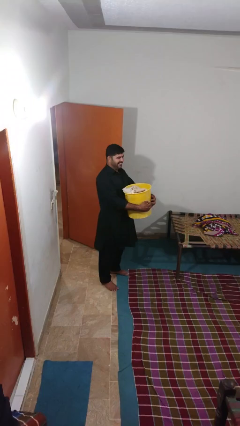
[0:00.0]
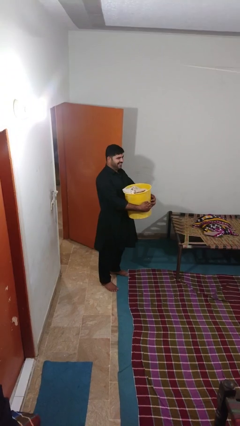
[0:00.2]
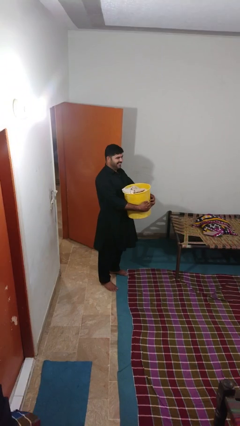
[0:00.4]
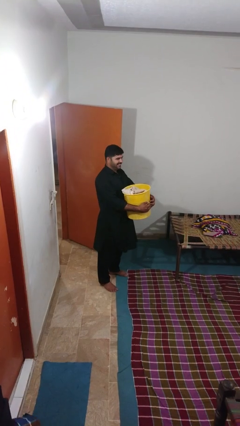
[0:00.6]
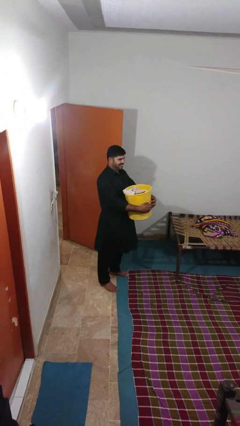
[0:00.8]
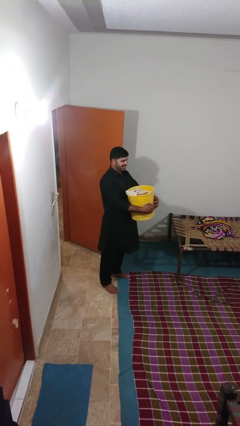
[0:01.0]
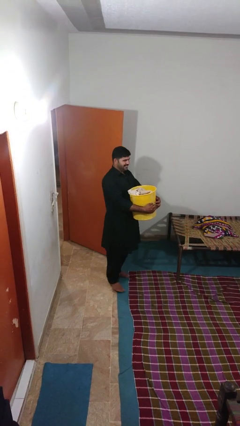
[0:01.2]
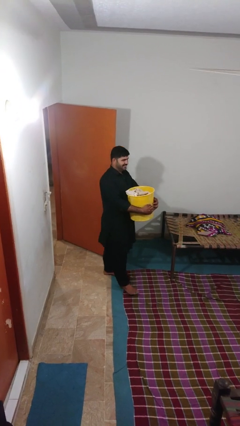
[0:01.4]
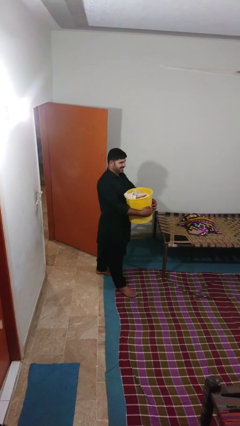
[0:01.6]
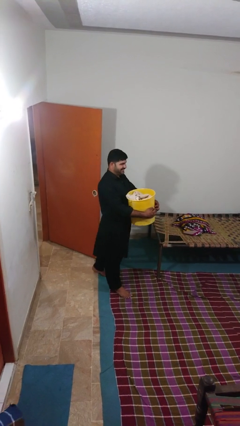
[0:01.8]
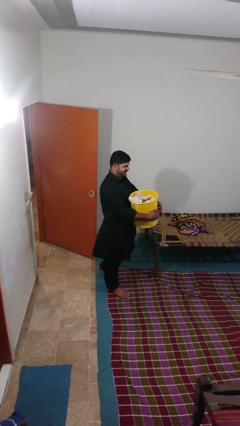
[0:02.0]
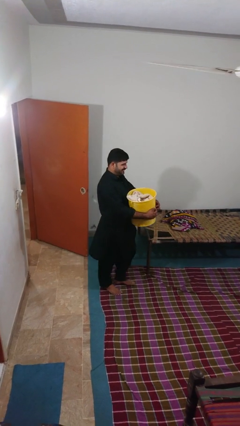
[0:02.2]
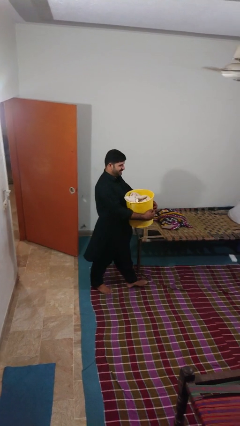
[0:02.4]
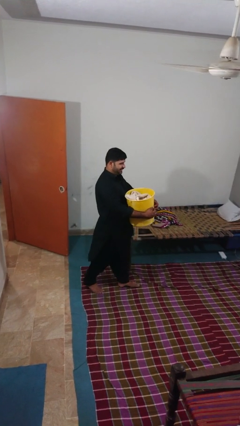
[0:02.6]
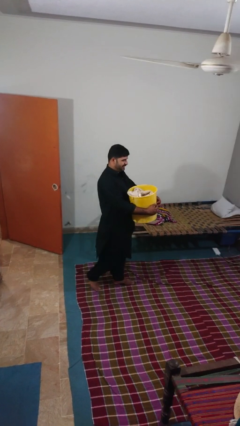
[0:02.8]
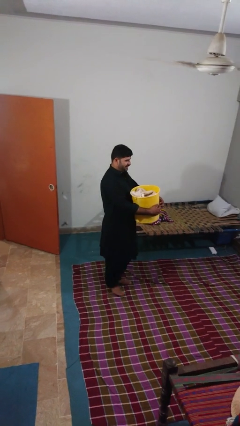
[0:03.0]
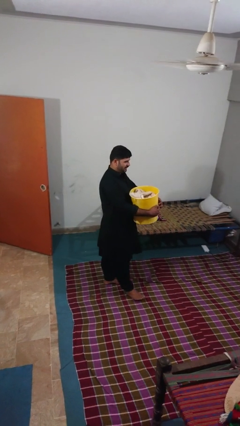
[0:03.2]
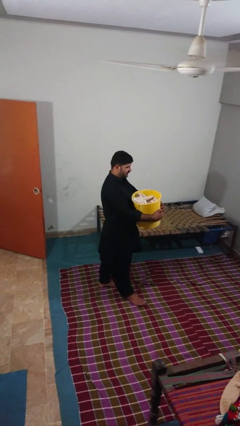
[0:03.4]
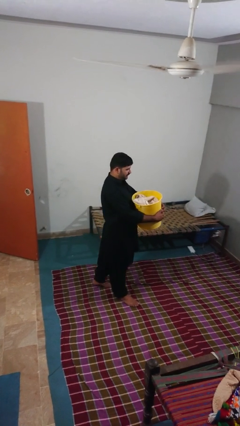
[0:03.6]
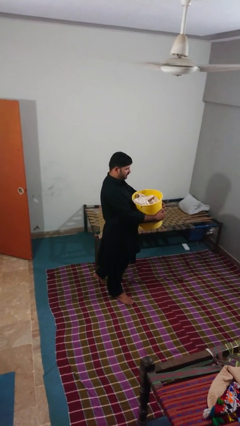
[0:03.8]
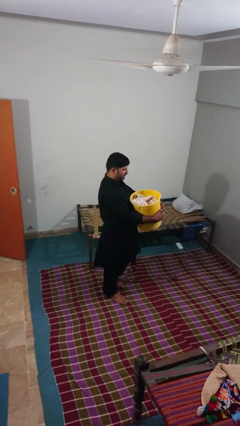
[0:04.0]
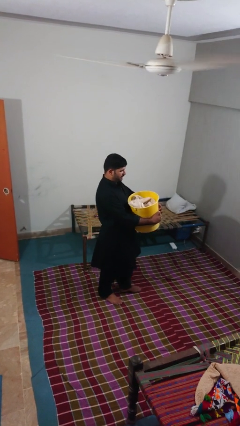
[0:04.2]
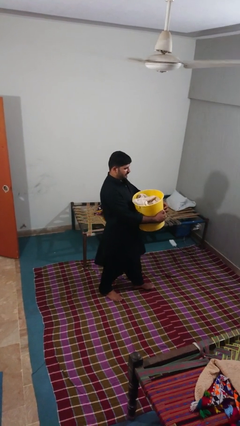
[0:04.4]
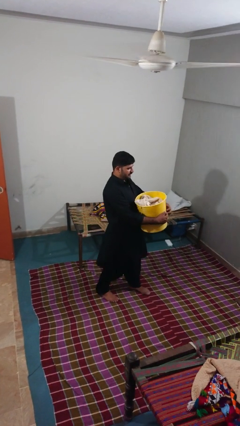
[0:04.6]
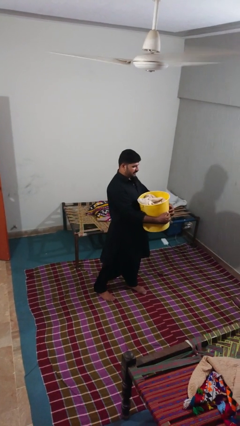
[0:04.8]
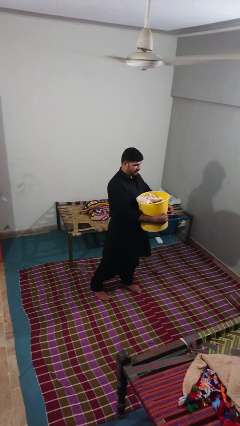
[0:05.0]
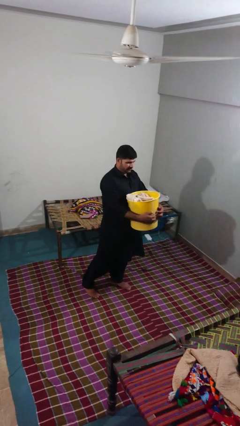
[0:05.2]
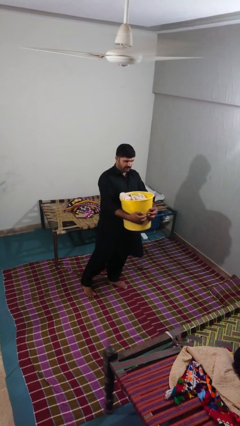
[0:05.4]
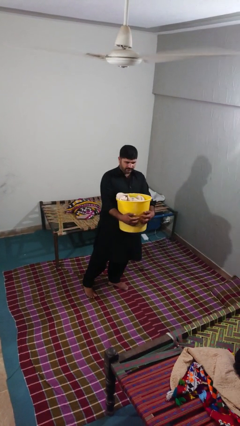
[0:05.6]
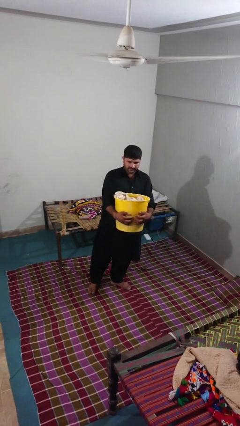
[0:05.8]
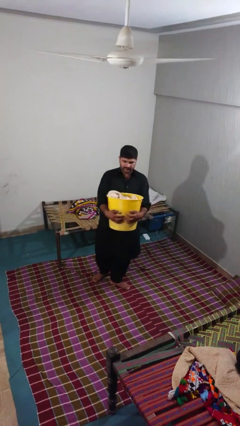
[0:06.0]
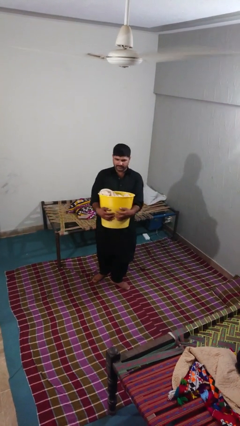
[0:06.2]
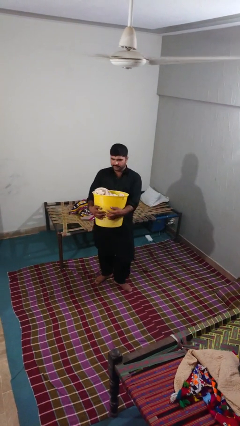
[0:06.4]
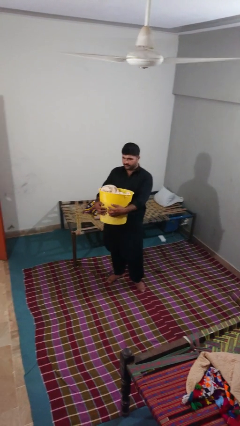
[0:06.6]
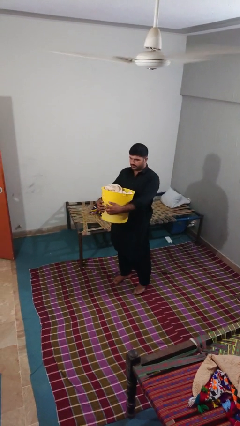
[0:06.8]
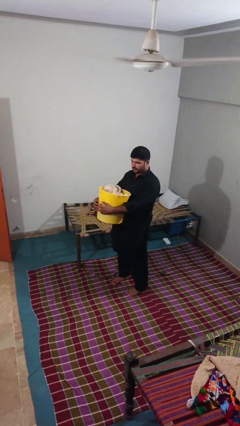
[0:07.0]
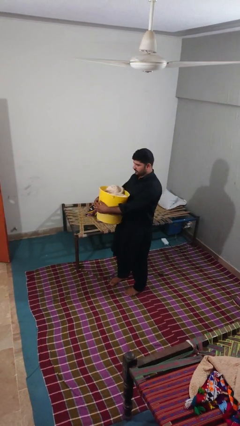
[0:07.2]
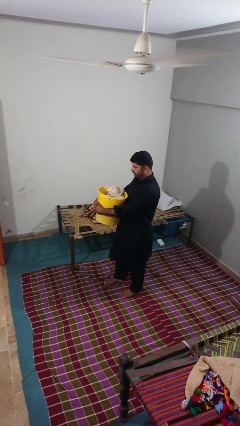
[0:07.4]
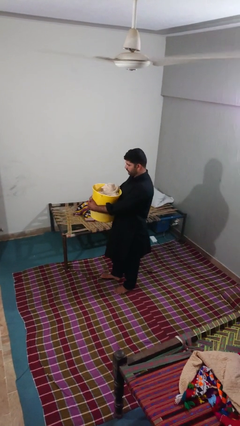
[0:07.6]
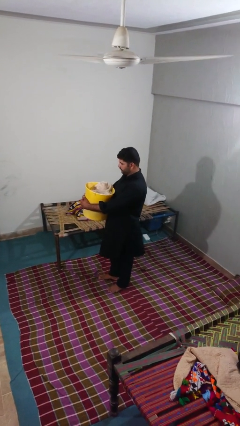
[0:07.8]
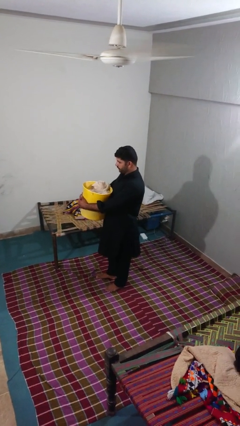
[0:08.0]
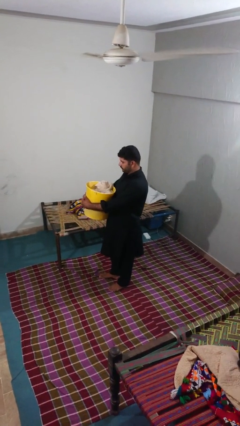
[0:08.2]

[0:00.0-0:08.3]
person carries laundry basket

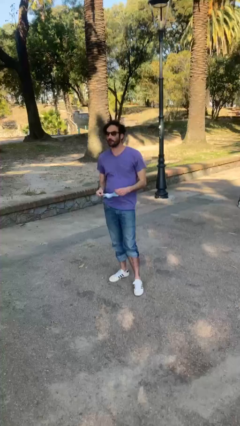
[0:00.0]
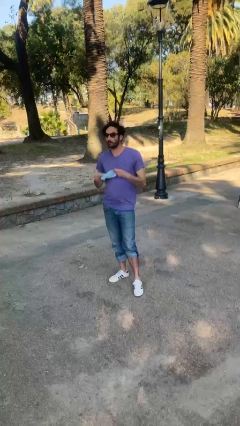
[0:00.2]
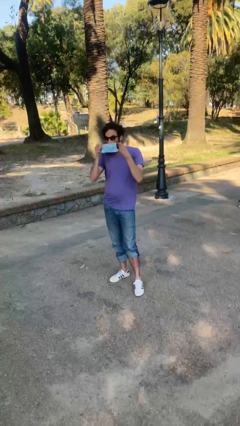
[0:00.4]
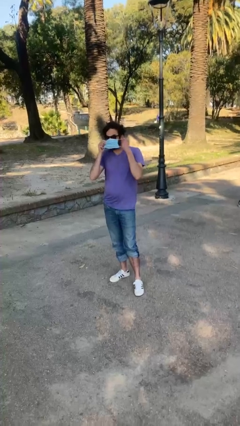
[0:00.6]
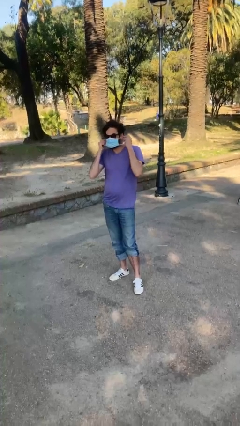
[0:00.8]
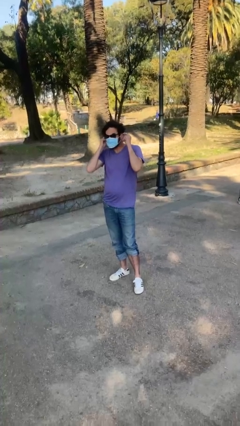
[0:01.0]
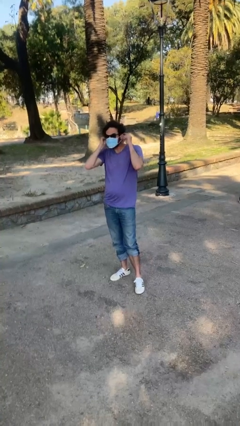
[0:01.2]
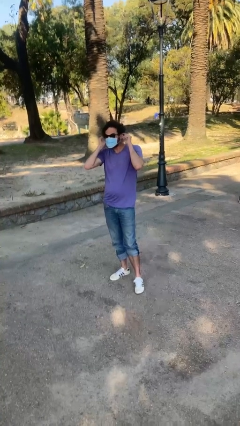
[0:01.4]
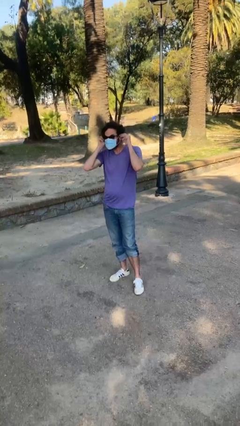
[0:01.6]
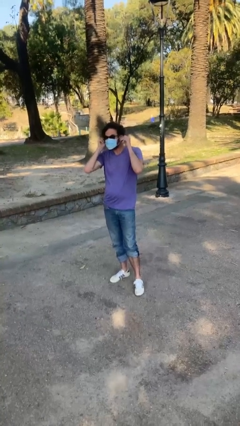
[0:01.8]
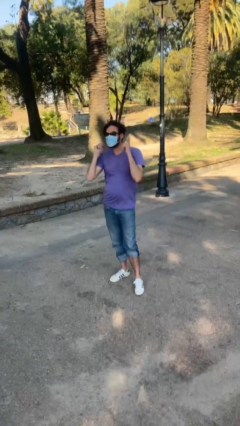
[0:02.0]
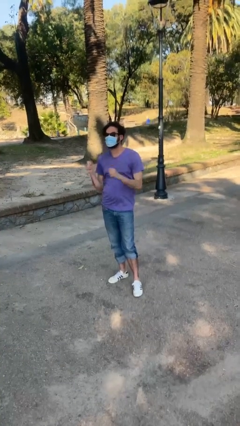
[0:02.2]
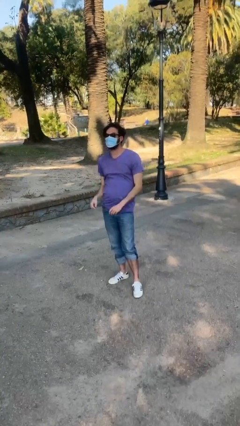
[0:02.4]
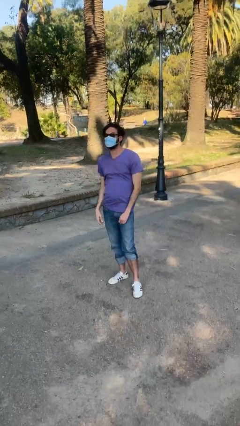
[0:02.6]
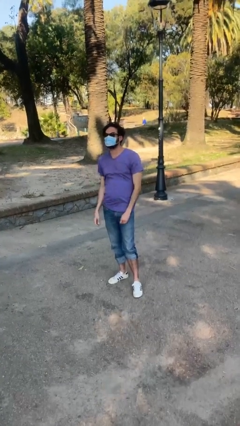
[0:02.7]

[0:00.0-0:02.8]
person puts on facemask

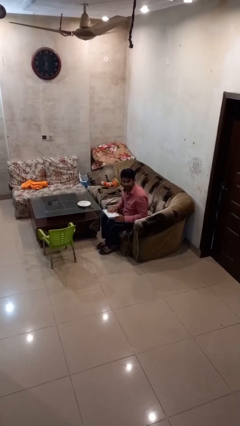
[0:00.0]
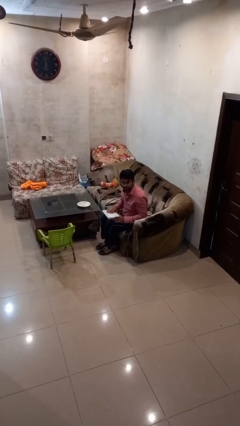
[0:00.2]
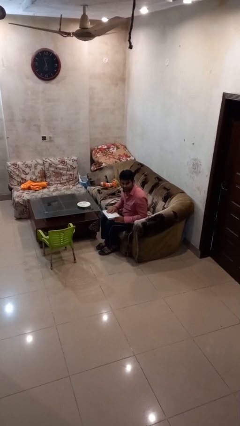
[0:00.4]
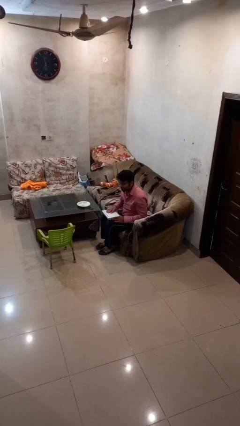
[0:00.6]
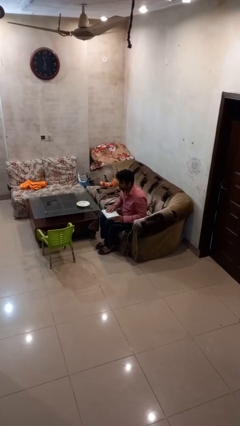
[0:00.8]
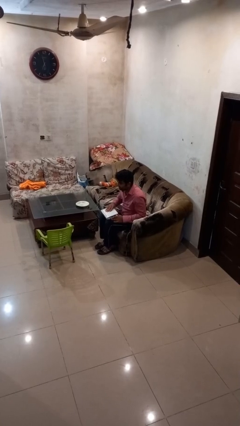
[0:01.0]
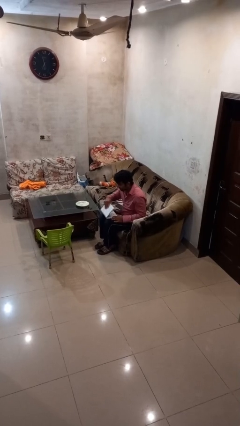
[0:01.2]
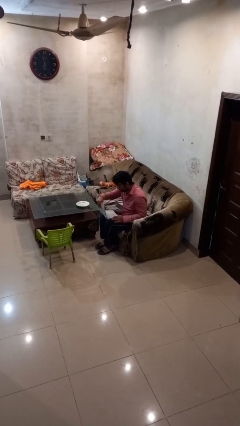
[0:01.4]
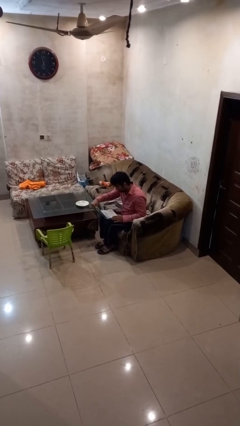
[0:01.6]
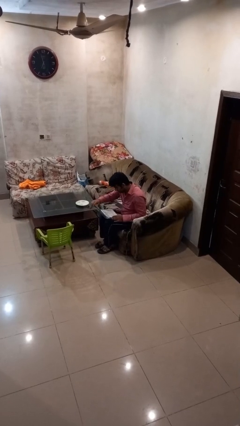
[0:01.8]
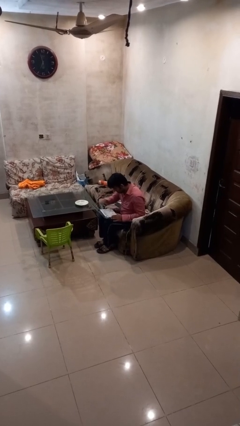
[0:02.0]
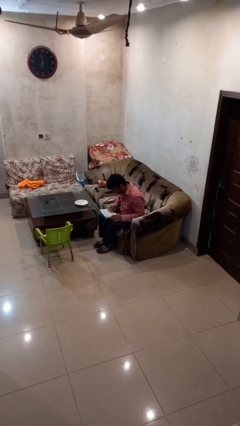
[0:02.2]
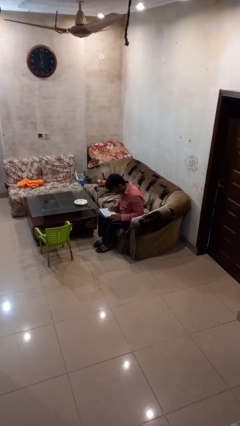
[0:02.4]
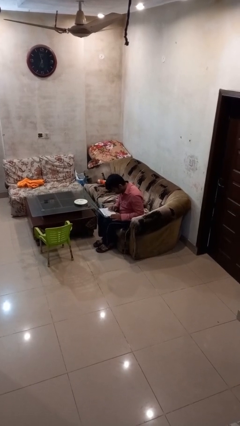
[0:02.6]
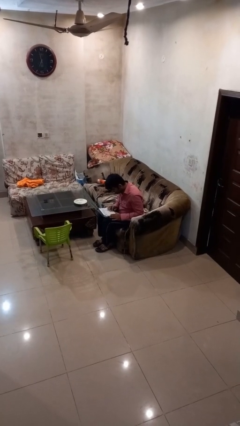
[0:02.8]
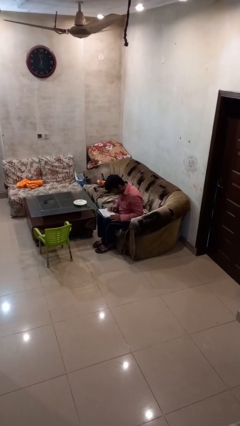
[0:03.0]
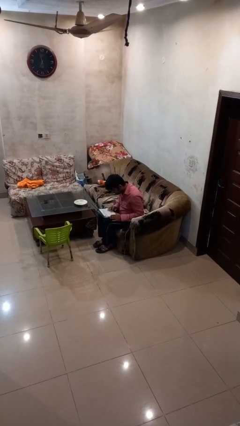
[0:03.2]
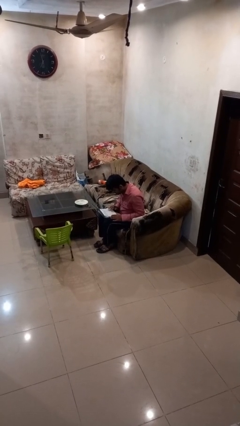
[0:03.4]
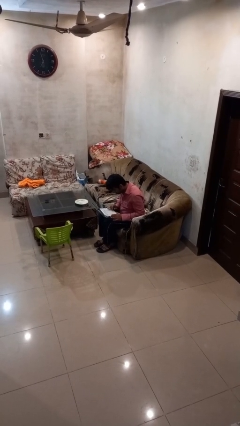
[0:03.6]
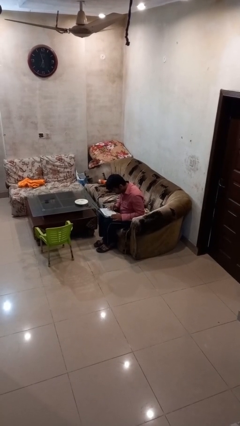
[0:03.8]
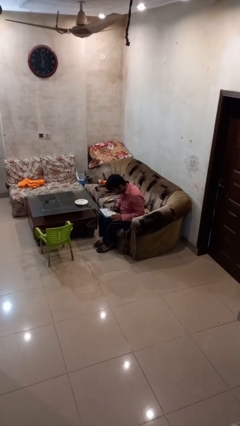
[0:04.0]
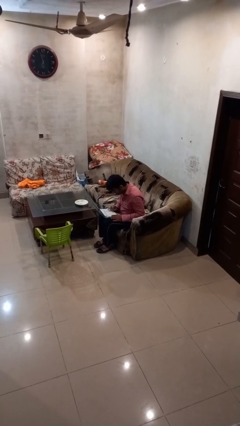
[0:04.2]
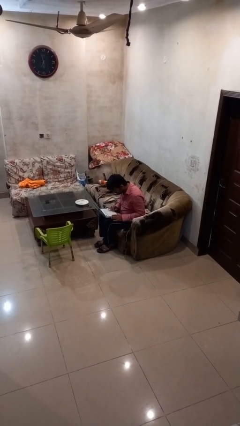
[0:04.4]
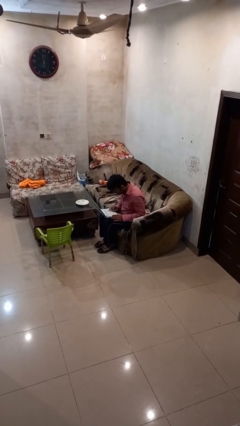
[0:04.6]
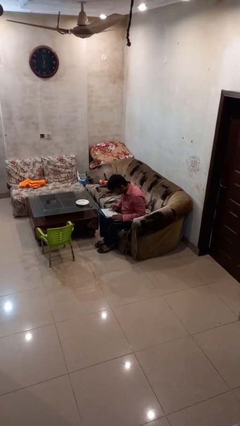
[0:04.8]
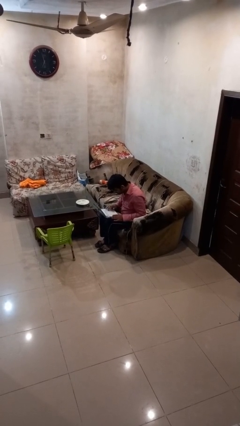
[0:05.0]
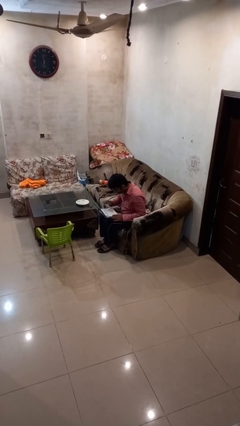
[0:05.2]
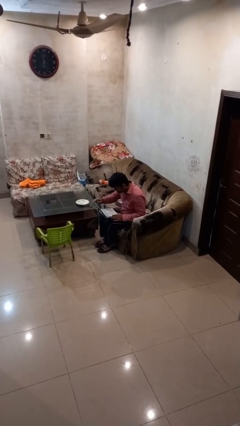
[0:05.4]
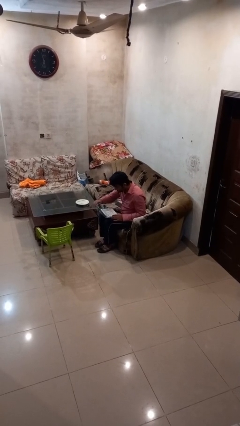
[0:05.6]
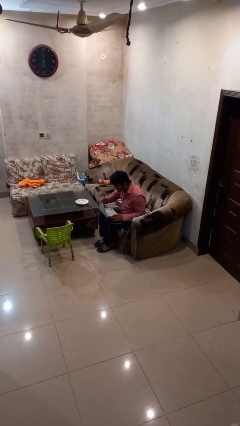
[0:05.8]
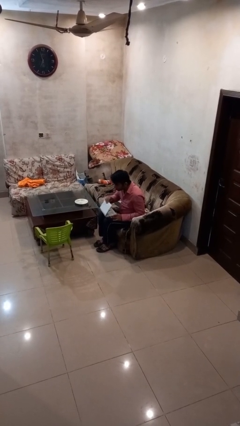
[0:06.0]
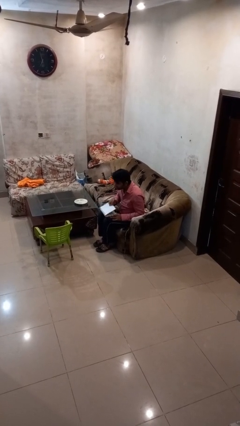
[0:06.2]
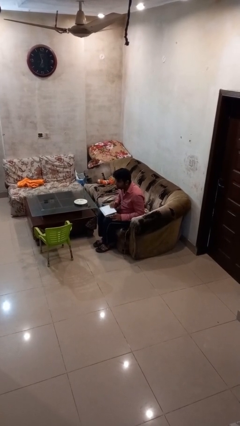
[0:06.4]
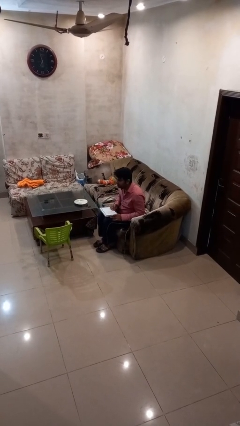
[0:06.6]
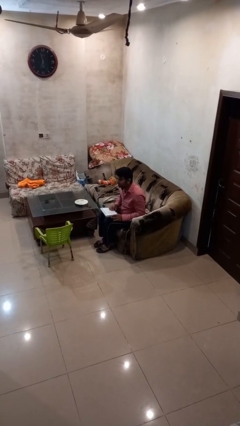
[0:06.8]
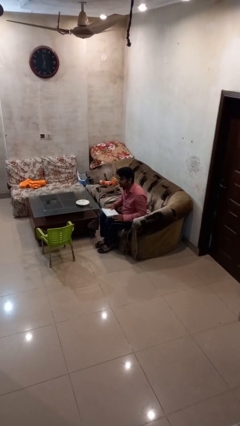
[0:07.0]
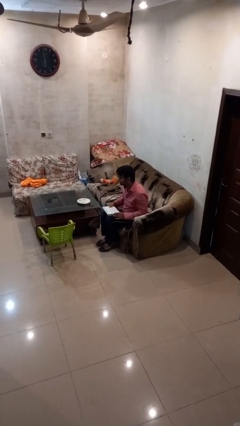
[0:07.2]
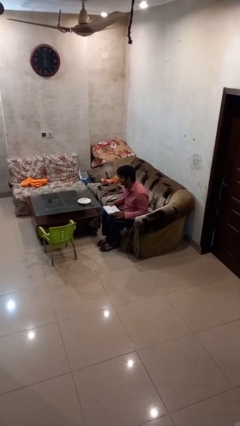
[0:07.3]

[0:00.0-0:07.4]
person interacts with laptop
